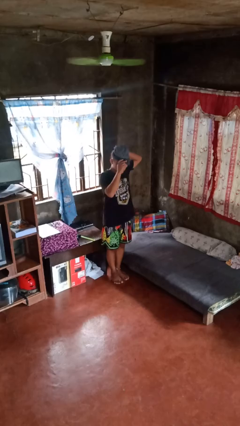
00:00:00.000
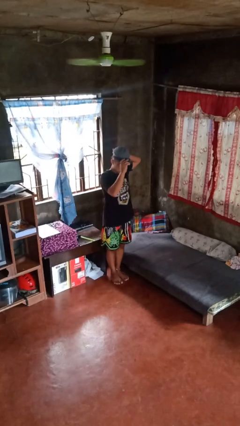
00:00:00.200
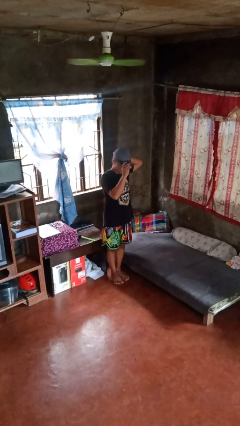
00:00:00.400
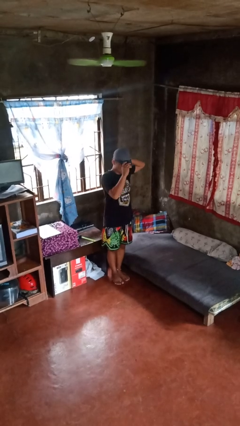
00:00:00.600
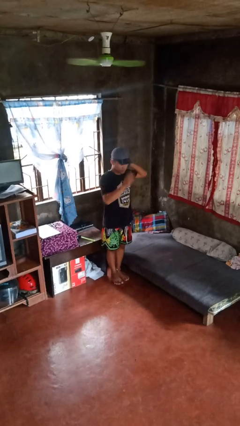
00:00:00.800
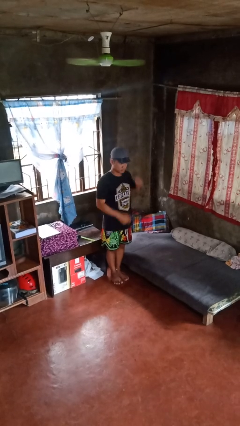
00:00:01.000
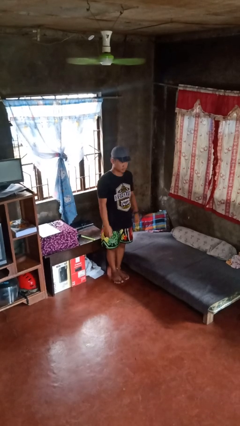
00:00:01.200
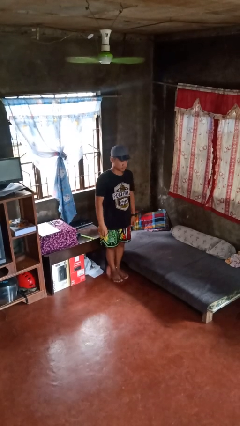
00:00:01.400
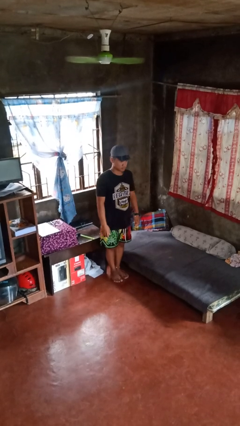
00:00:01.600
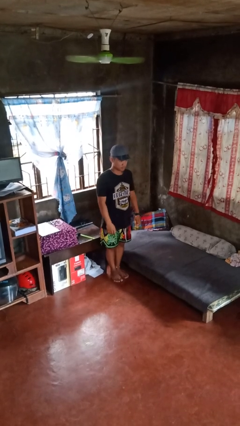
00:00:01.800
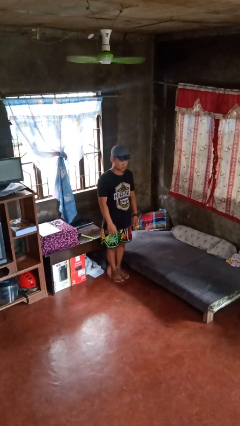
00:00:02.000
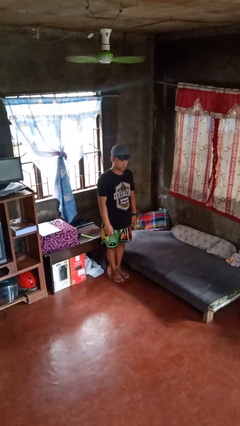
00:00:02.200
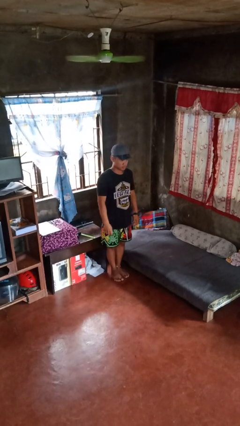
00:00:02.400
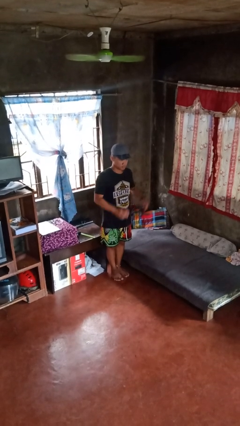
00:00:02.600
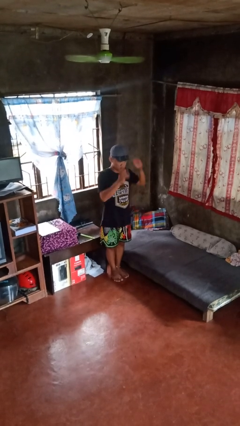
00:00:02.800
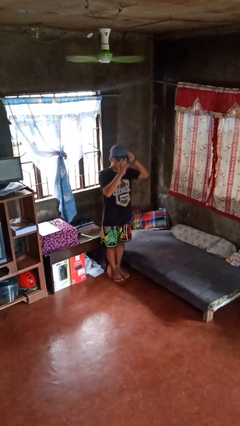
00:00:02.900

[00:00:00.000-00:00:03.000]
person puts on hat

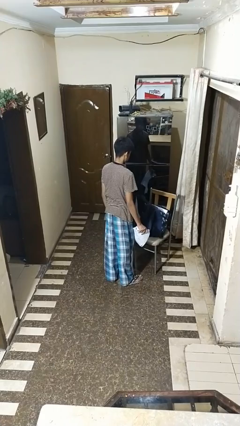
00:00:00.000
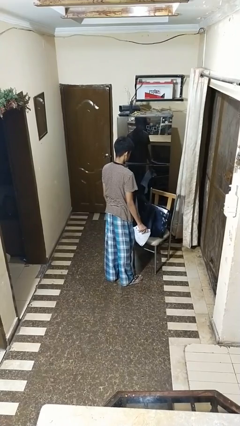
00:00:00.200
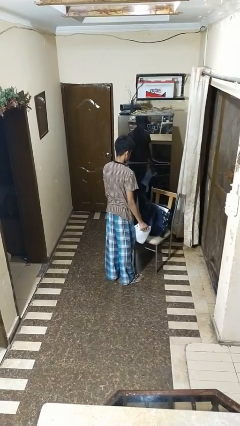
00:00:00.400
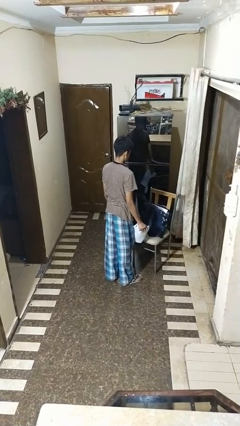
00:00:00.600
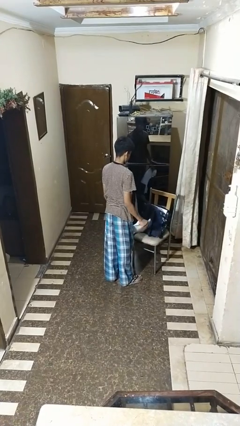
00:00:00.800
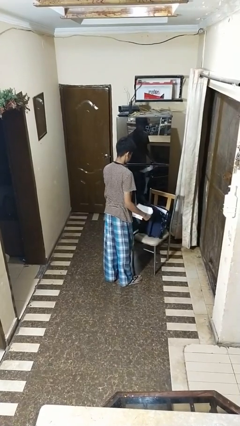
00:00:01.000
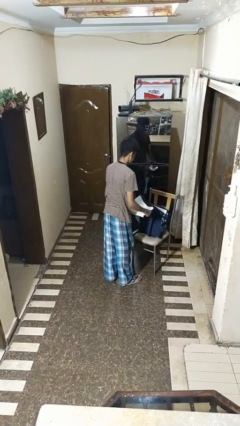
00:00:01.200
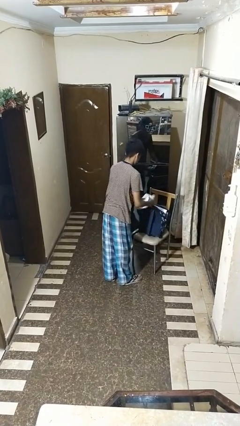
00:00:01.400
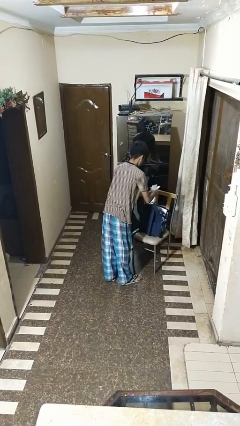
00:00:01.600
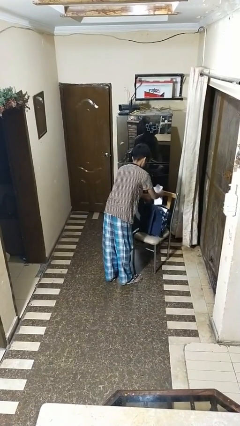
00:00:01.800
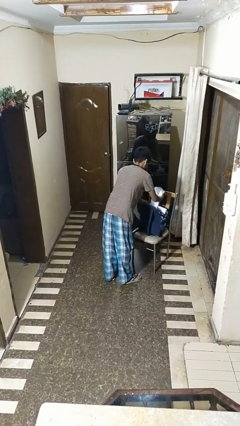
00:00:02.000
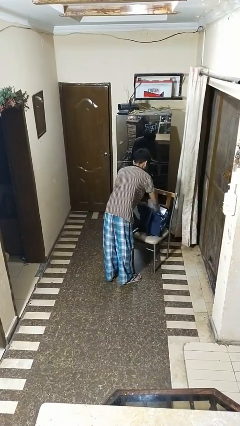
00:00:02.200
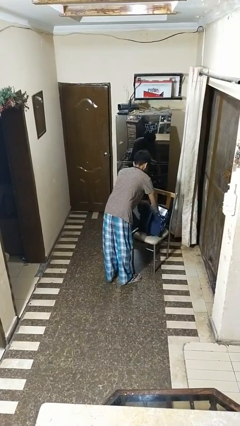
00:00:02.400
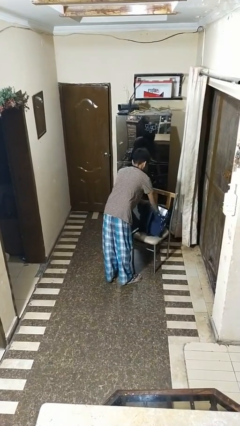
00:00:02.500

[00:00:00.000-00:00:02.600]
person puts object into bag

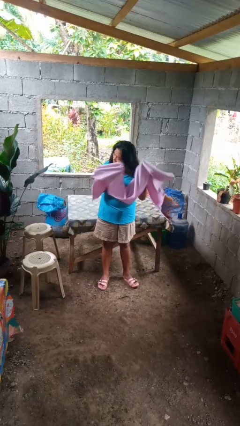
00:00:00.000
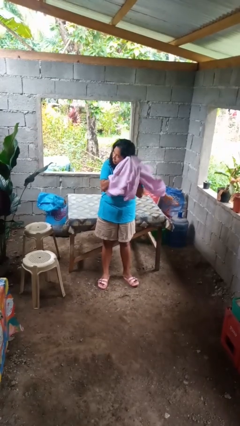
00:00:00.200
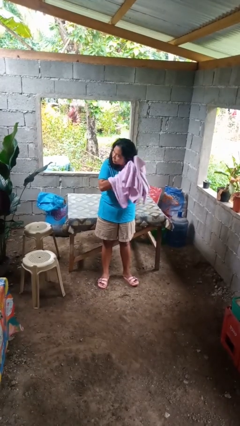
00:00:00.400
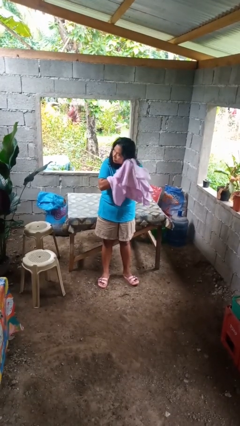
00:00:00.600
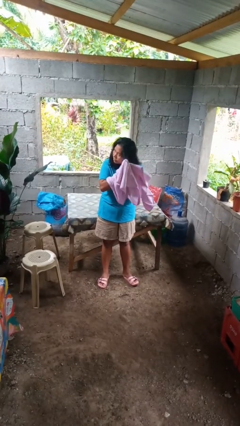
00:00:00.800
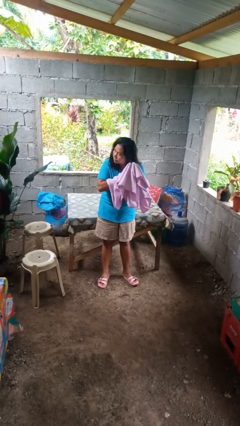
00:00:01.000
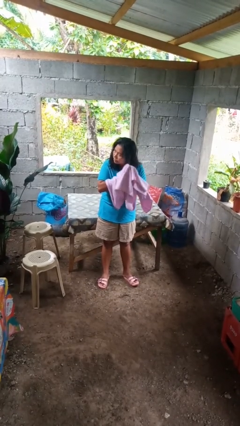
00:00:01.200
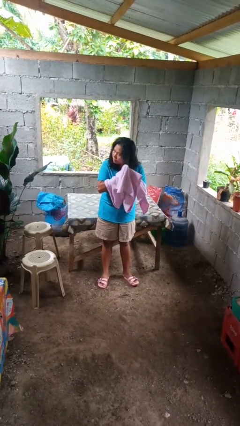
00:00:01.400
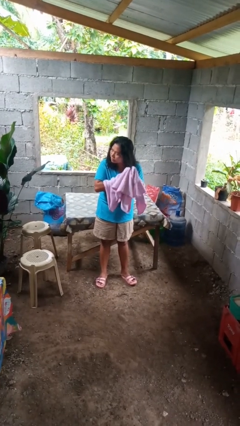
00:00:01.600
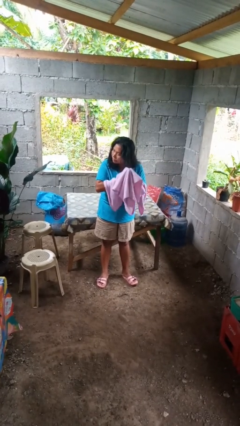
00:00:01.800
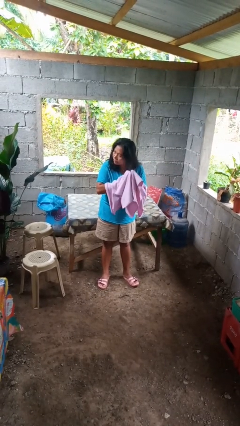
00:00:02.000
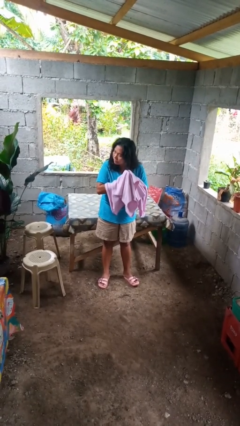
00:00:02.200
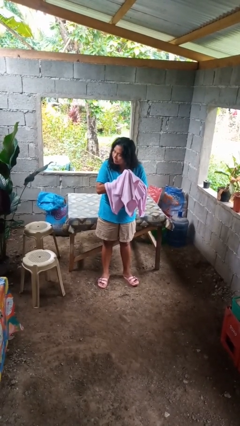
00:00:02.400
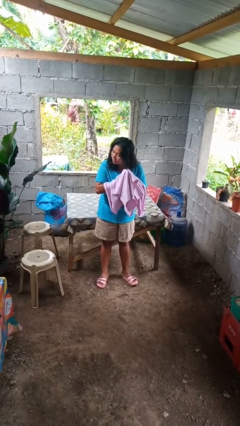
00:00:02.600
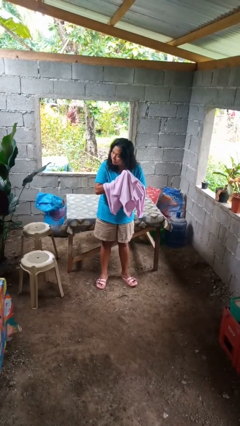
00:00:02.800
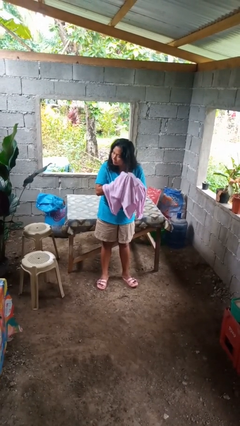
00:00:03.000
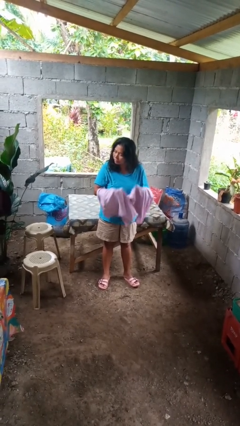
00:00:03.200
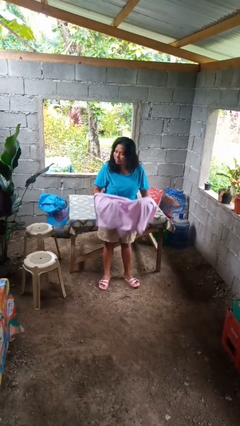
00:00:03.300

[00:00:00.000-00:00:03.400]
person dries hair with towel

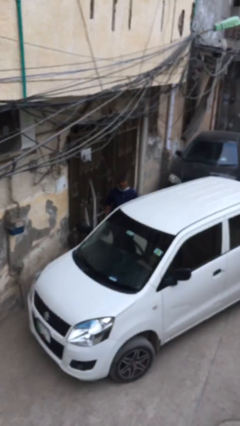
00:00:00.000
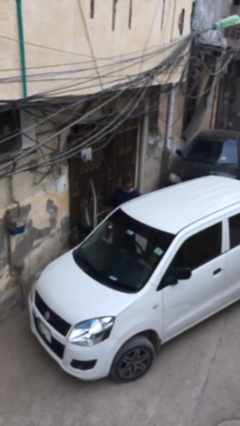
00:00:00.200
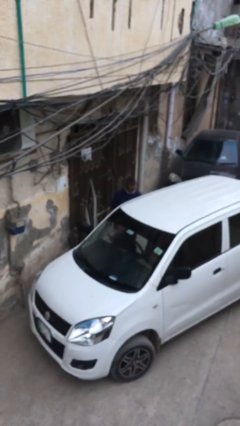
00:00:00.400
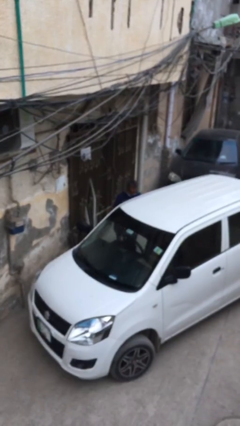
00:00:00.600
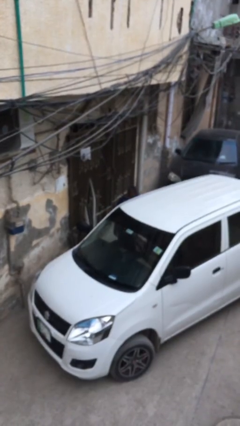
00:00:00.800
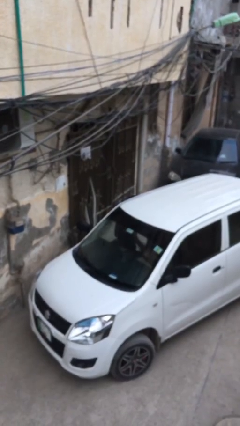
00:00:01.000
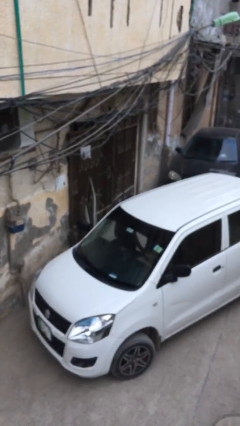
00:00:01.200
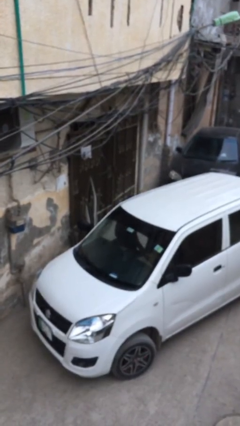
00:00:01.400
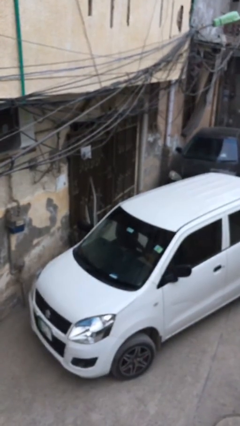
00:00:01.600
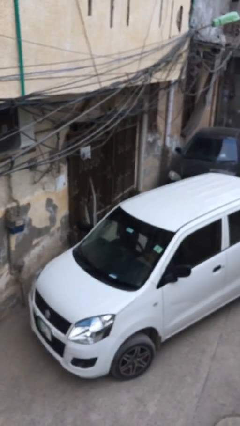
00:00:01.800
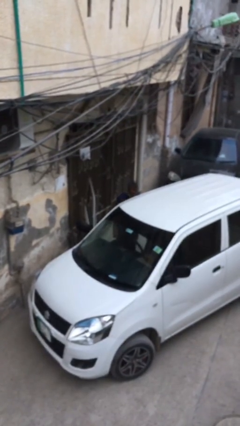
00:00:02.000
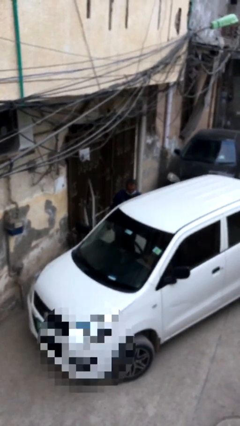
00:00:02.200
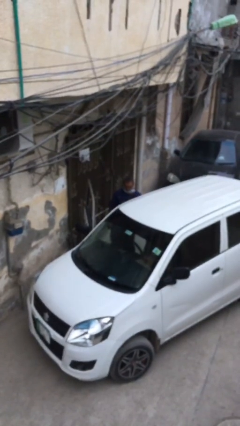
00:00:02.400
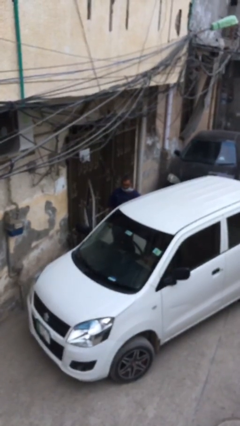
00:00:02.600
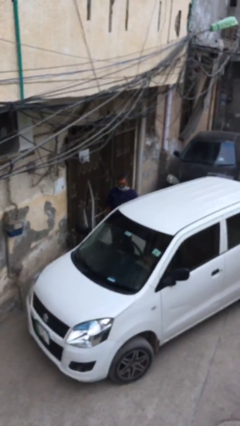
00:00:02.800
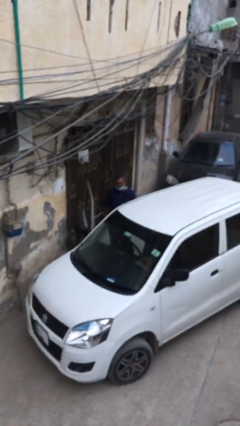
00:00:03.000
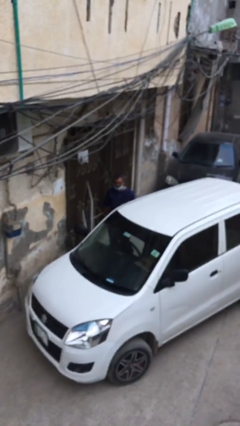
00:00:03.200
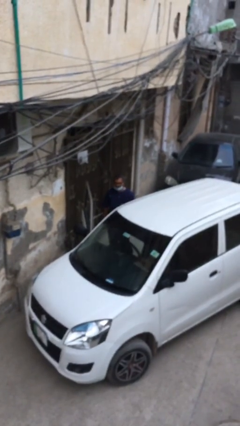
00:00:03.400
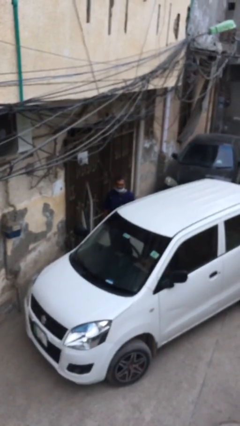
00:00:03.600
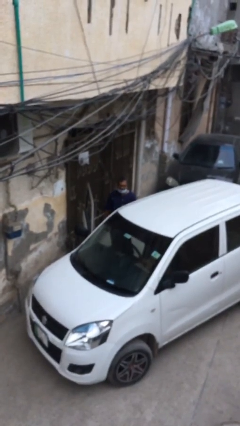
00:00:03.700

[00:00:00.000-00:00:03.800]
person loads car

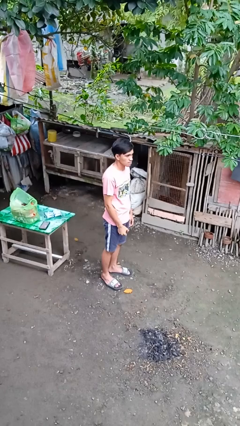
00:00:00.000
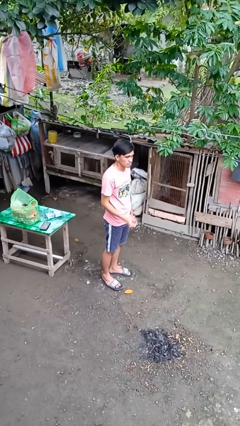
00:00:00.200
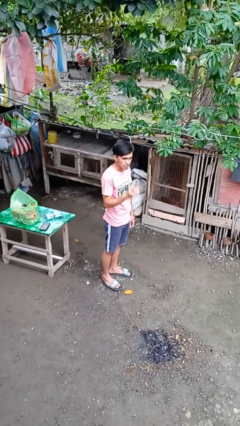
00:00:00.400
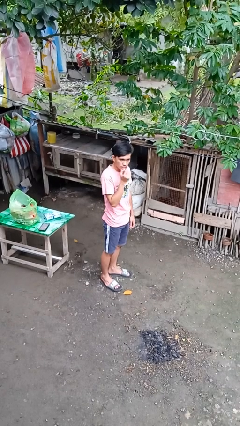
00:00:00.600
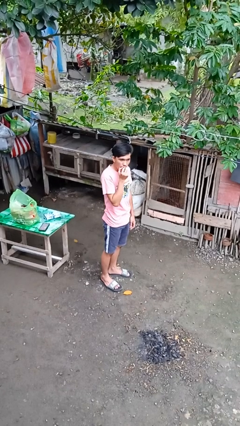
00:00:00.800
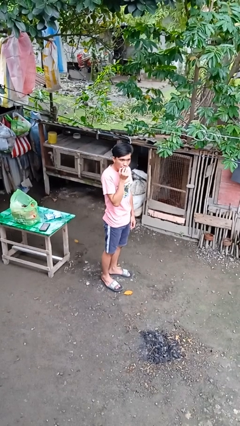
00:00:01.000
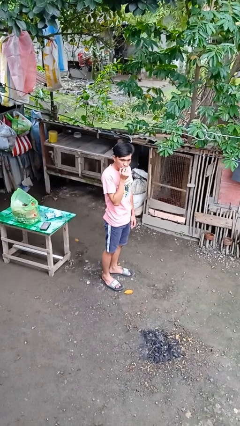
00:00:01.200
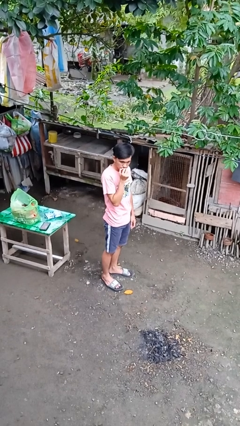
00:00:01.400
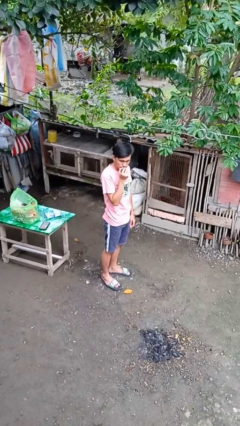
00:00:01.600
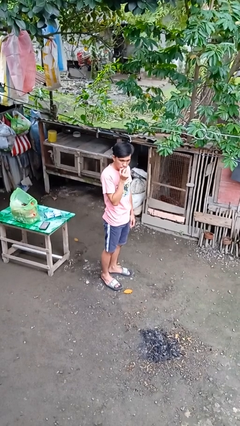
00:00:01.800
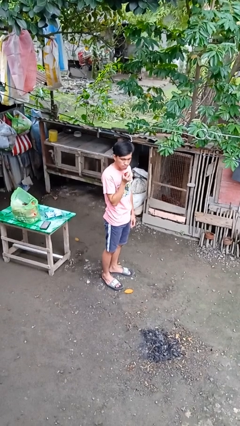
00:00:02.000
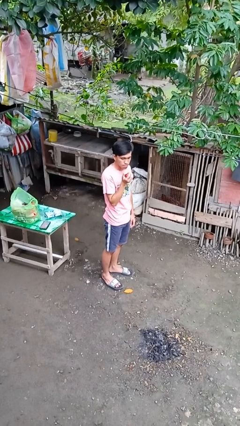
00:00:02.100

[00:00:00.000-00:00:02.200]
person eats apple

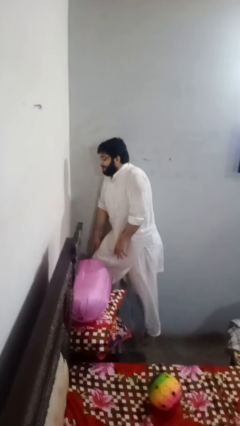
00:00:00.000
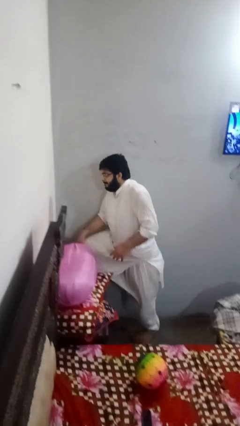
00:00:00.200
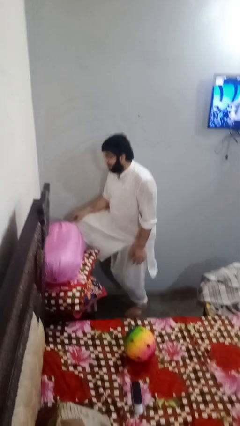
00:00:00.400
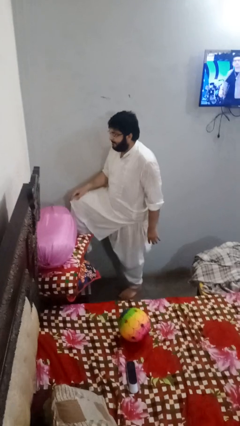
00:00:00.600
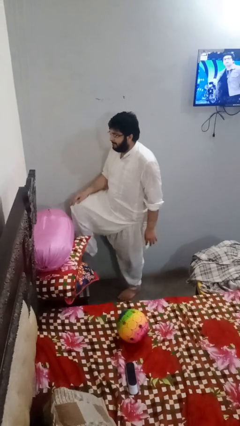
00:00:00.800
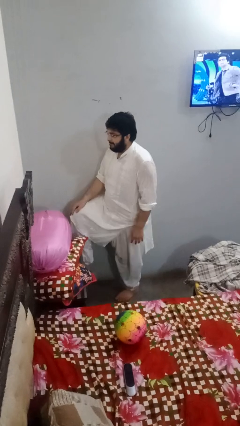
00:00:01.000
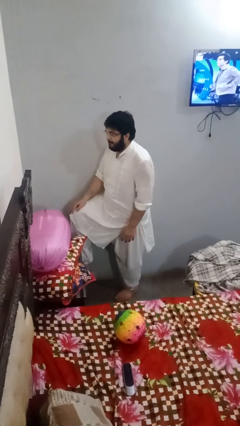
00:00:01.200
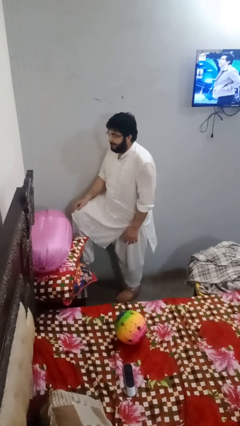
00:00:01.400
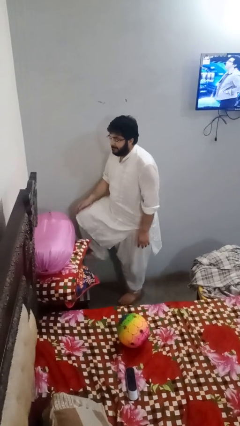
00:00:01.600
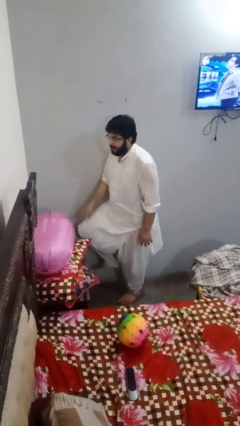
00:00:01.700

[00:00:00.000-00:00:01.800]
person climbs off table

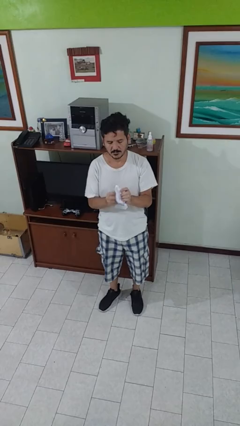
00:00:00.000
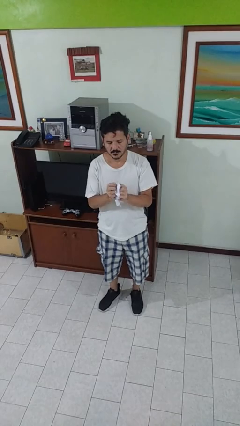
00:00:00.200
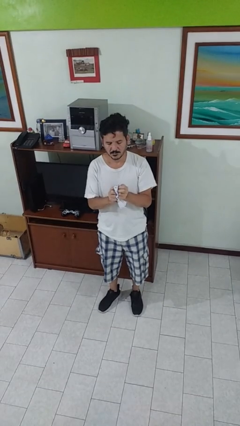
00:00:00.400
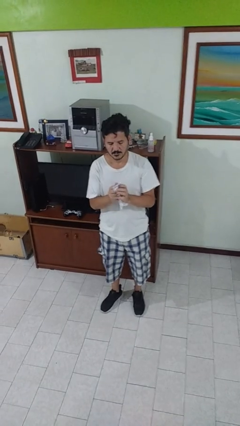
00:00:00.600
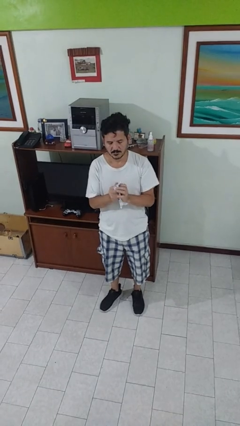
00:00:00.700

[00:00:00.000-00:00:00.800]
person crumples paper
